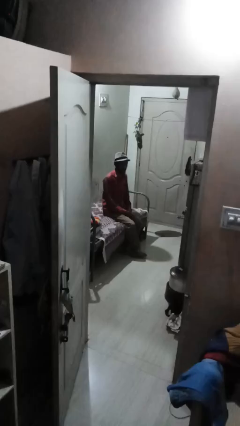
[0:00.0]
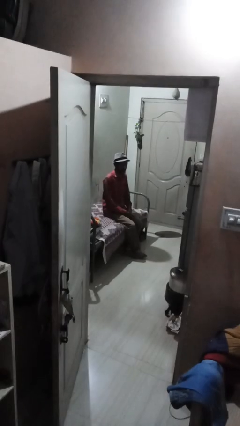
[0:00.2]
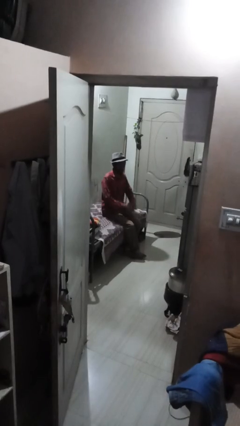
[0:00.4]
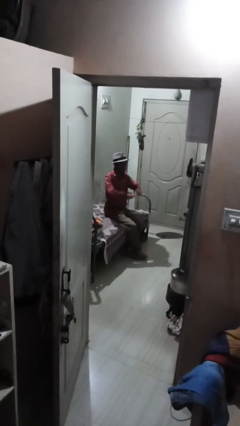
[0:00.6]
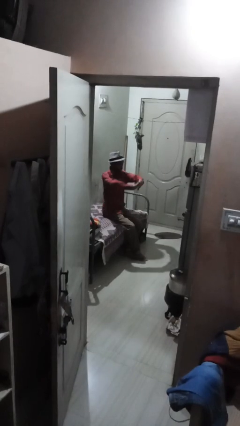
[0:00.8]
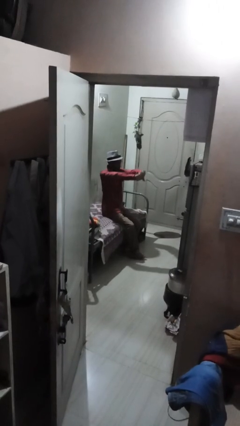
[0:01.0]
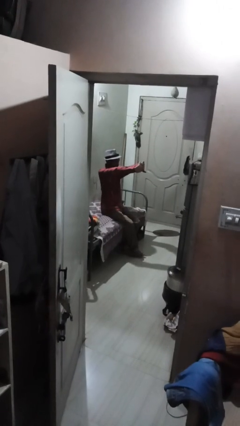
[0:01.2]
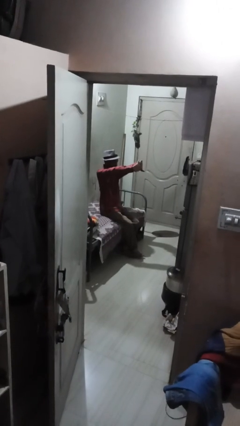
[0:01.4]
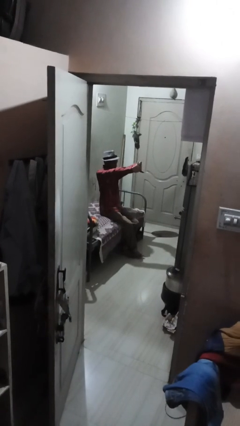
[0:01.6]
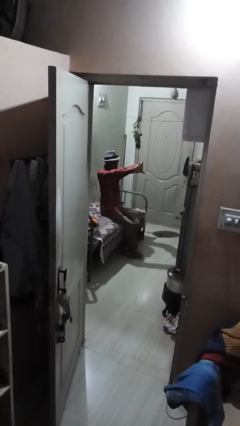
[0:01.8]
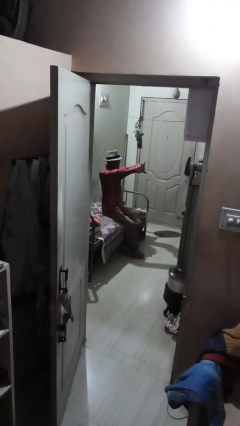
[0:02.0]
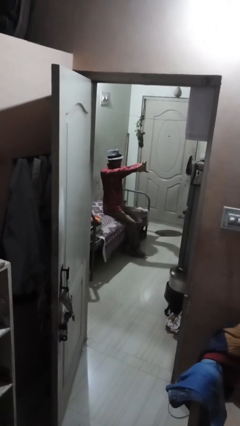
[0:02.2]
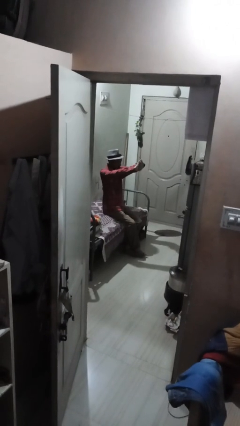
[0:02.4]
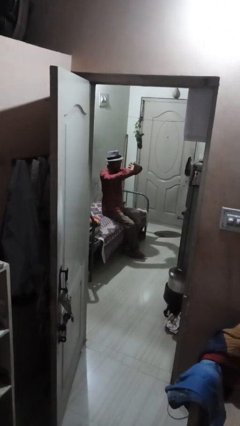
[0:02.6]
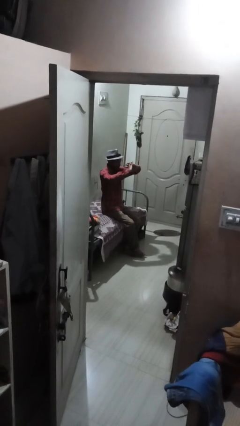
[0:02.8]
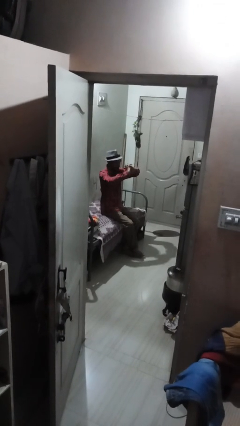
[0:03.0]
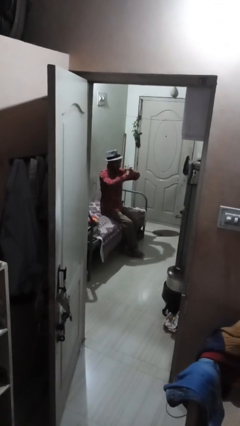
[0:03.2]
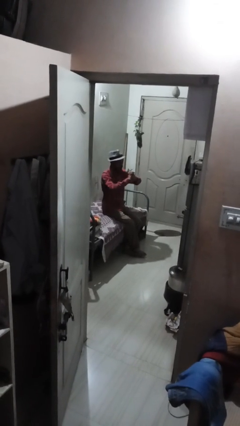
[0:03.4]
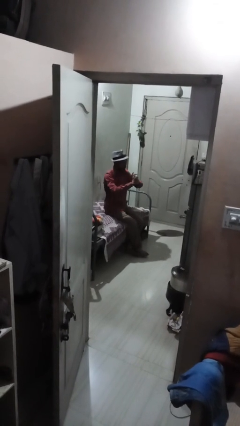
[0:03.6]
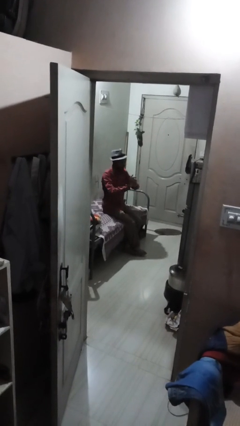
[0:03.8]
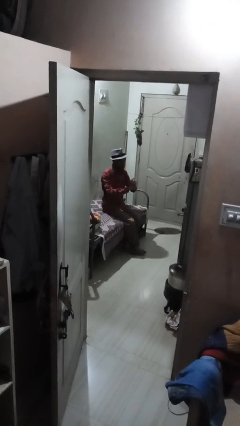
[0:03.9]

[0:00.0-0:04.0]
person cracks knuckles

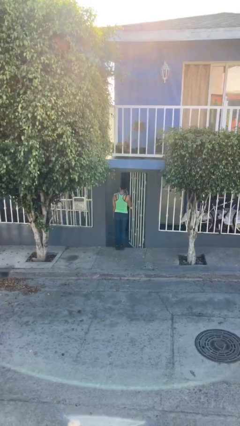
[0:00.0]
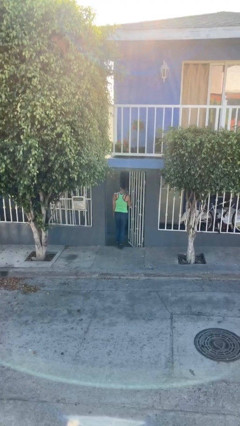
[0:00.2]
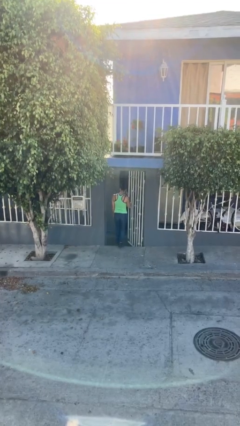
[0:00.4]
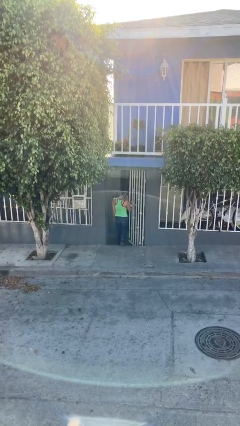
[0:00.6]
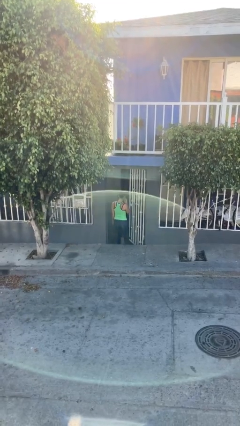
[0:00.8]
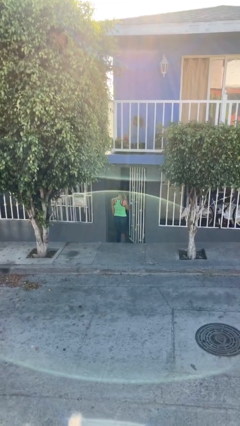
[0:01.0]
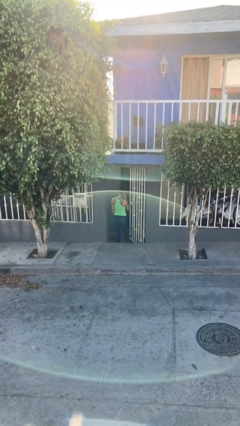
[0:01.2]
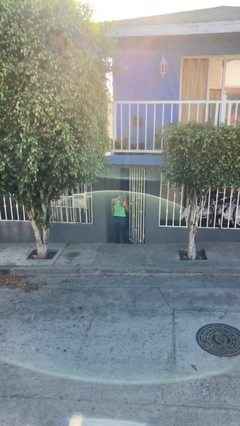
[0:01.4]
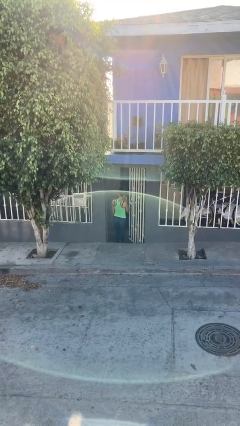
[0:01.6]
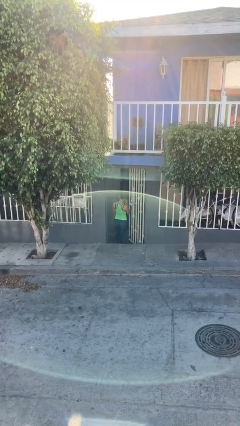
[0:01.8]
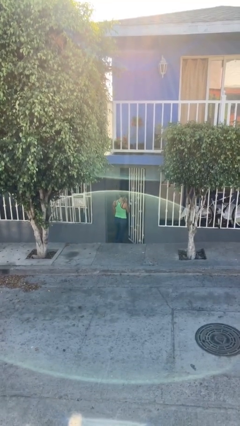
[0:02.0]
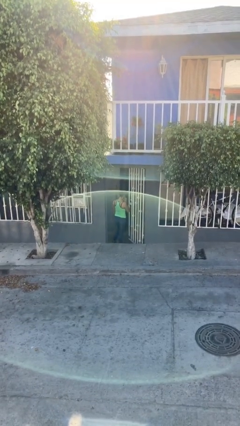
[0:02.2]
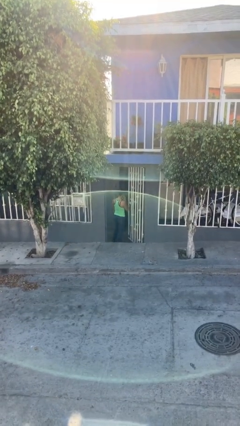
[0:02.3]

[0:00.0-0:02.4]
person exits scene through structure

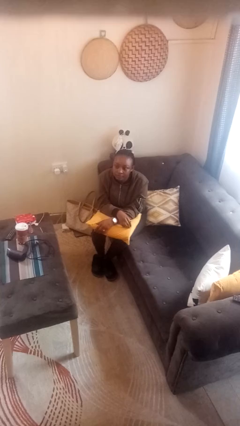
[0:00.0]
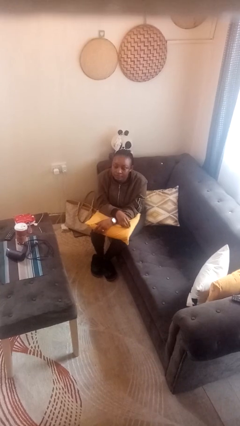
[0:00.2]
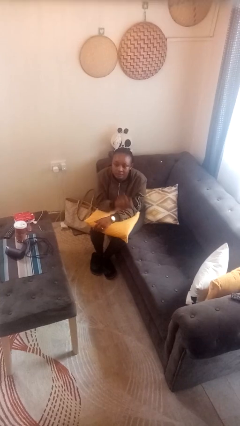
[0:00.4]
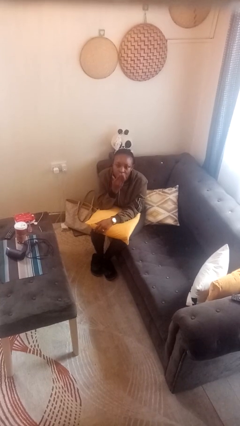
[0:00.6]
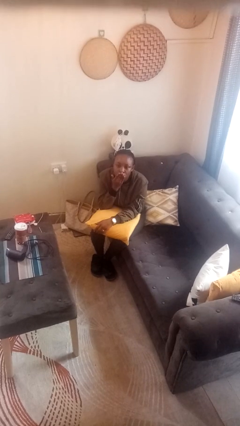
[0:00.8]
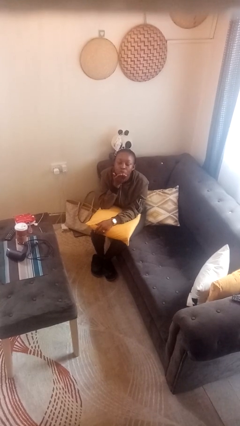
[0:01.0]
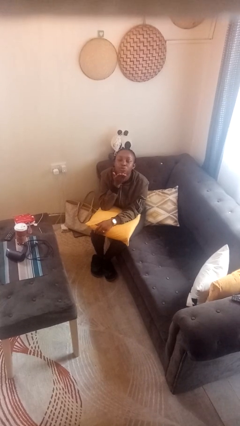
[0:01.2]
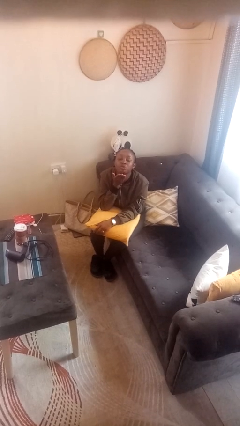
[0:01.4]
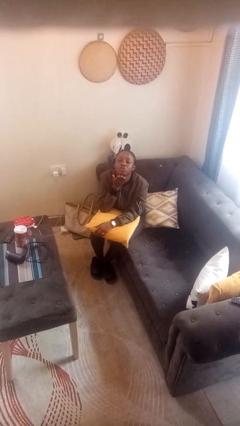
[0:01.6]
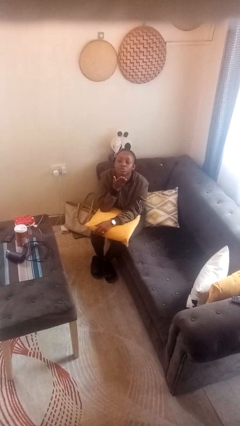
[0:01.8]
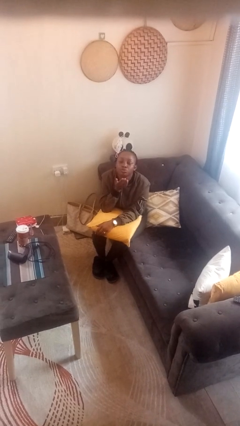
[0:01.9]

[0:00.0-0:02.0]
person gestures blow kiss

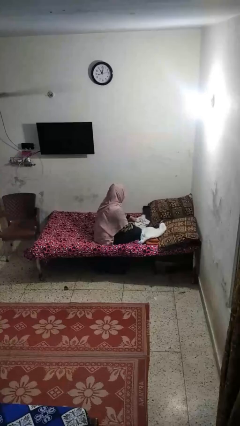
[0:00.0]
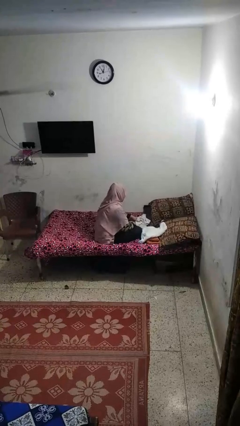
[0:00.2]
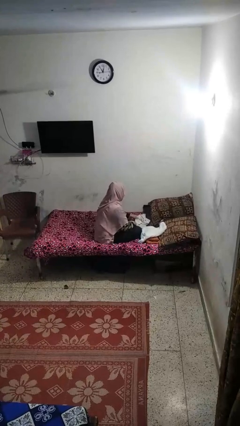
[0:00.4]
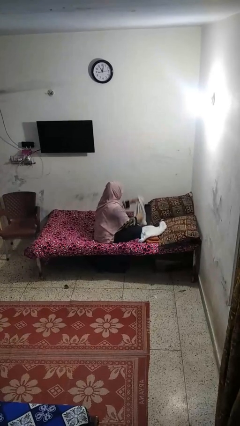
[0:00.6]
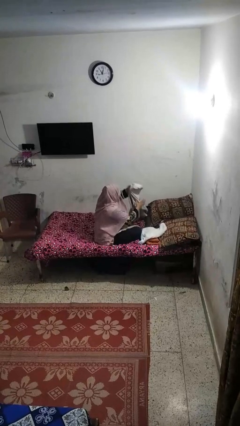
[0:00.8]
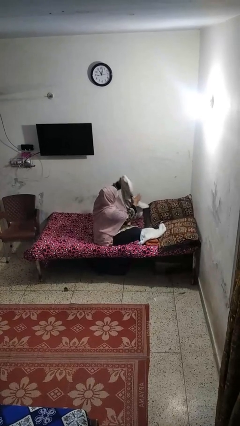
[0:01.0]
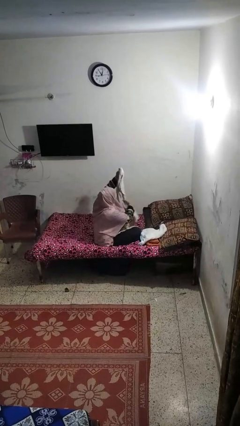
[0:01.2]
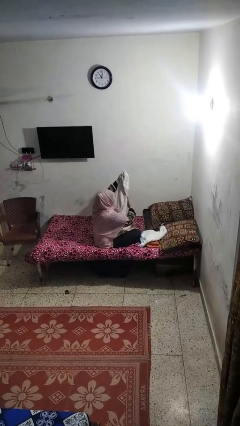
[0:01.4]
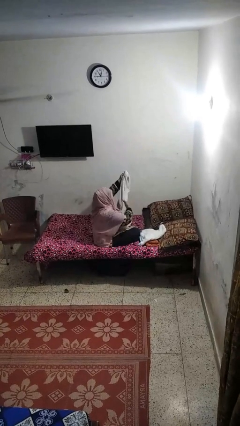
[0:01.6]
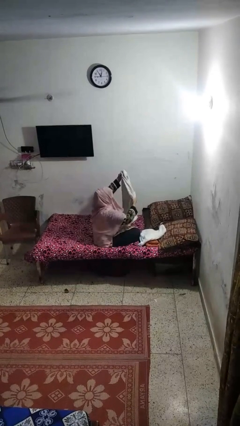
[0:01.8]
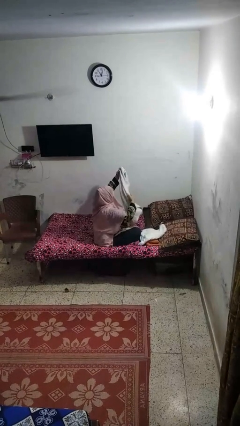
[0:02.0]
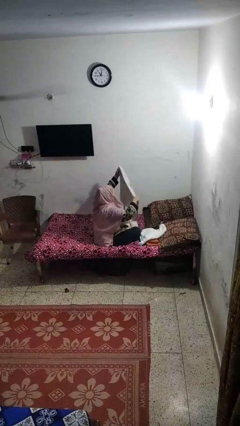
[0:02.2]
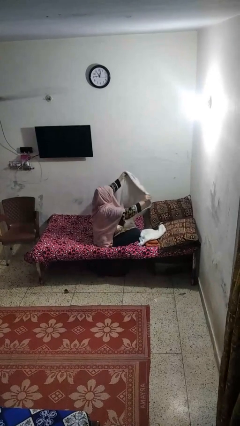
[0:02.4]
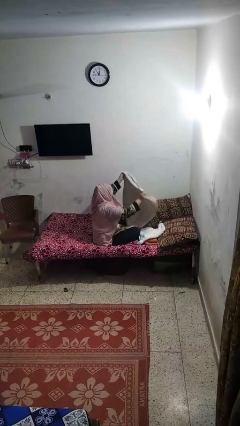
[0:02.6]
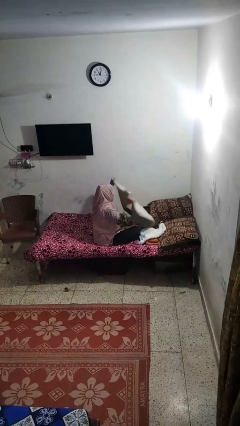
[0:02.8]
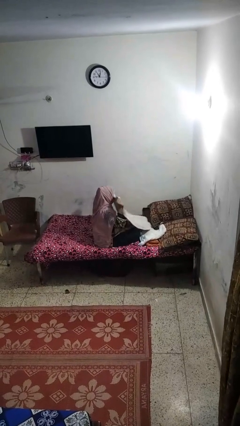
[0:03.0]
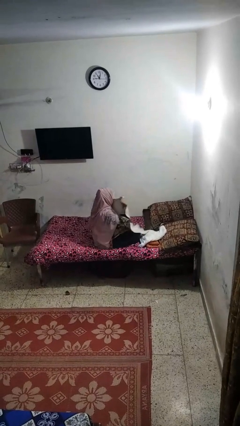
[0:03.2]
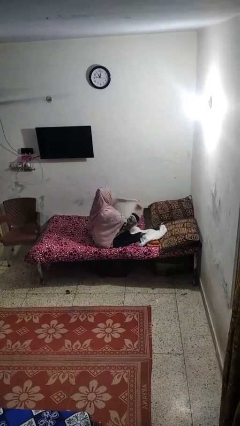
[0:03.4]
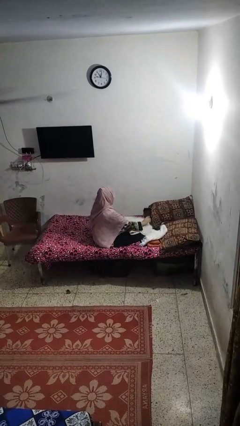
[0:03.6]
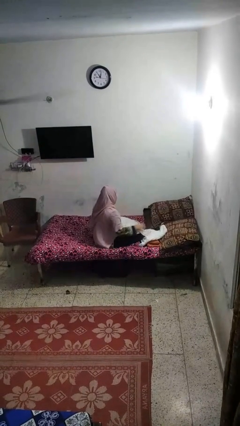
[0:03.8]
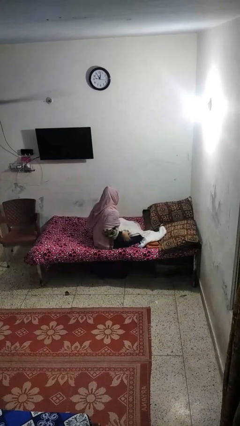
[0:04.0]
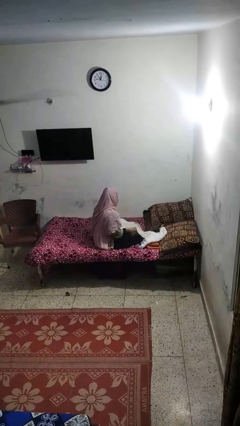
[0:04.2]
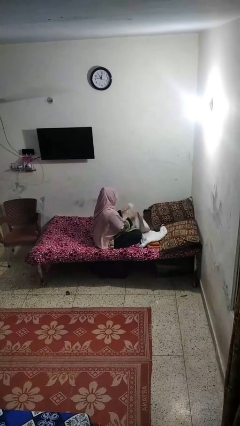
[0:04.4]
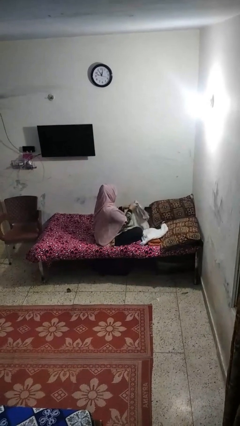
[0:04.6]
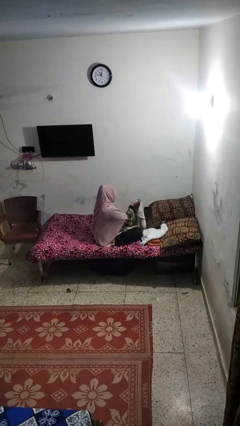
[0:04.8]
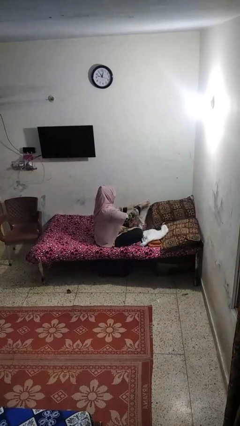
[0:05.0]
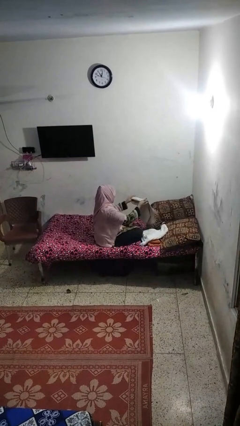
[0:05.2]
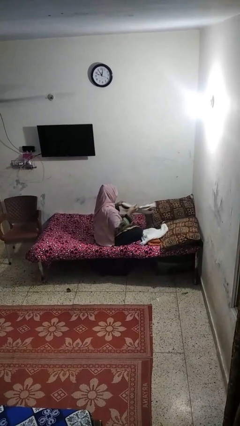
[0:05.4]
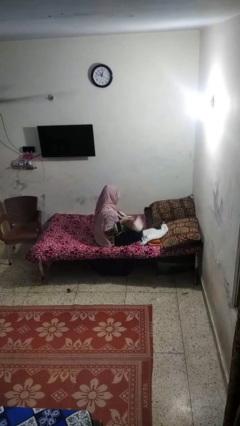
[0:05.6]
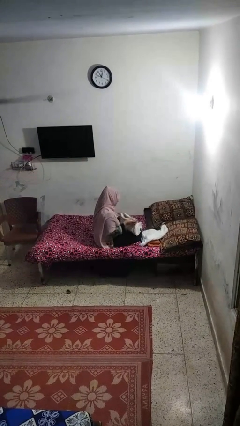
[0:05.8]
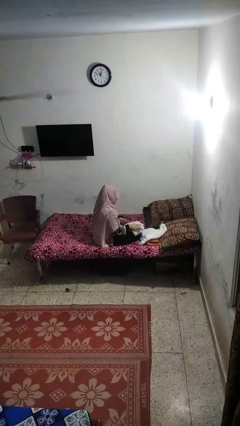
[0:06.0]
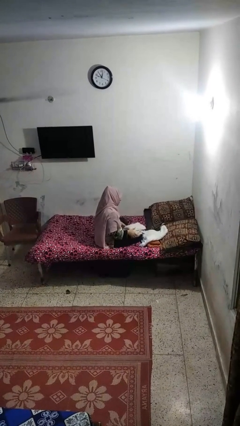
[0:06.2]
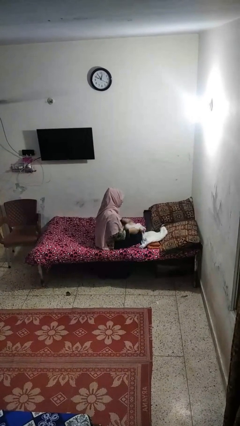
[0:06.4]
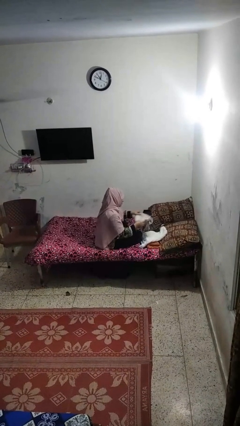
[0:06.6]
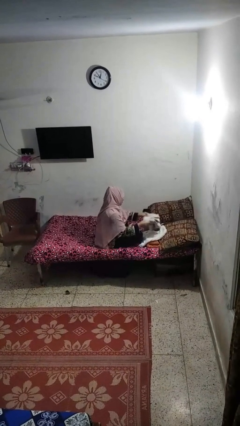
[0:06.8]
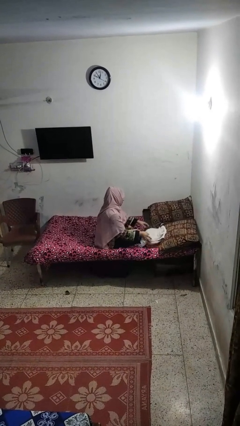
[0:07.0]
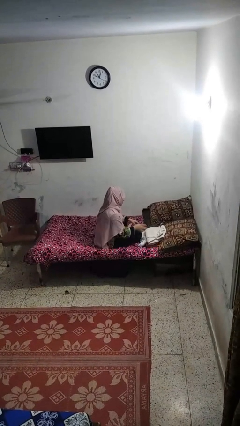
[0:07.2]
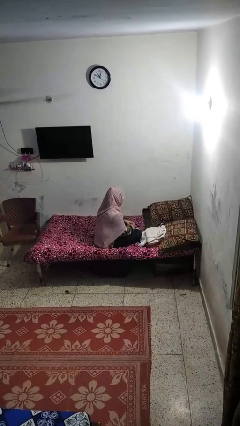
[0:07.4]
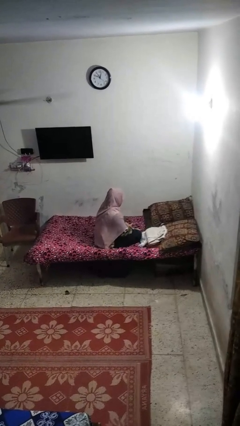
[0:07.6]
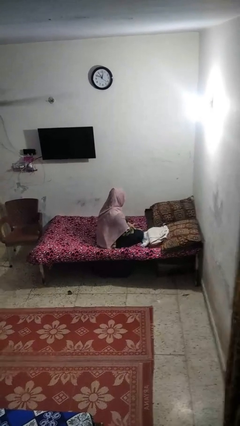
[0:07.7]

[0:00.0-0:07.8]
person folds towel

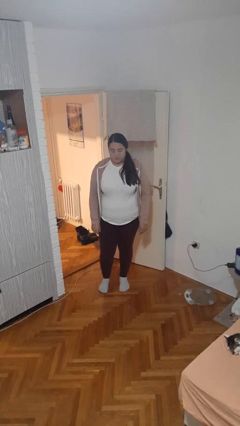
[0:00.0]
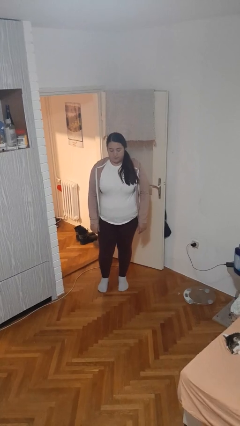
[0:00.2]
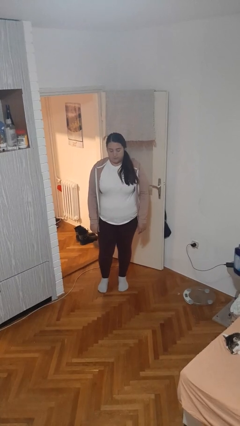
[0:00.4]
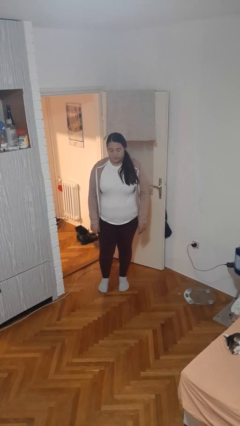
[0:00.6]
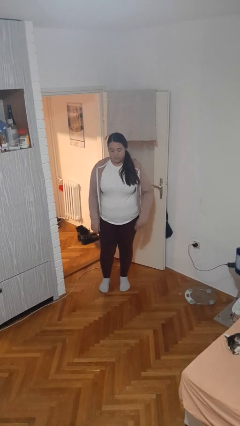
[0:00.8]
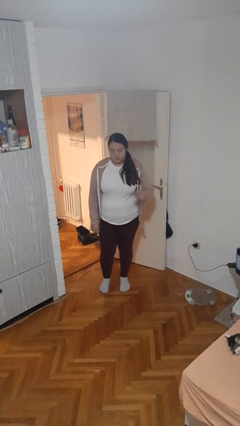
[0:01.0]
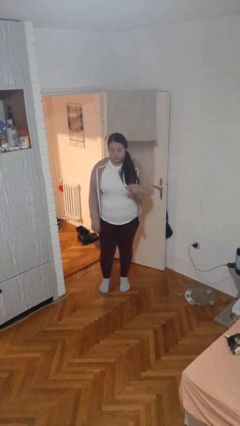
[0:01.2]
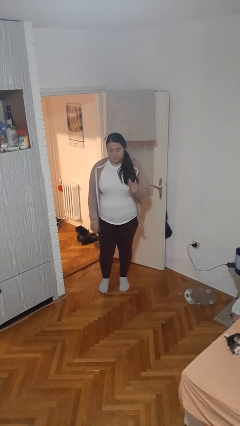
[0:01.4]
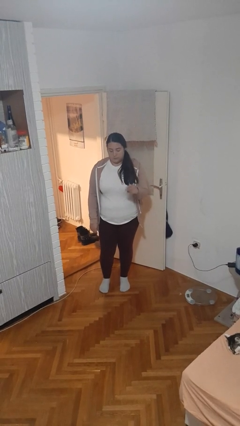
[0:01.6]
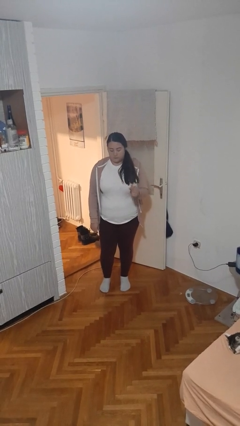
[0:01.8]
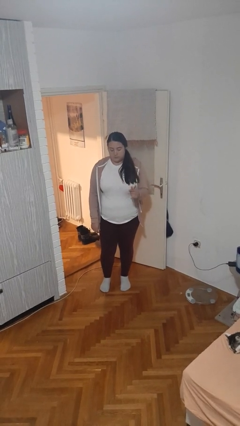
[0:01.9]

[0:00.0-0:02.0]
person snaps fingers
